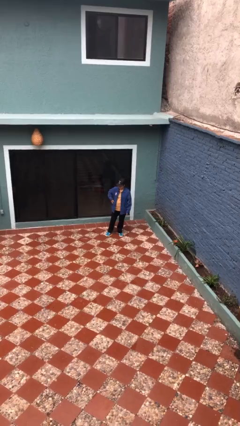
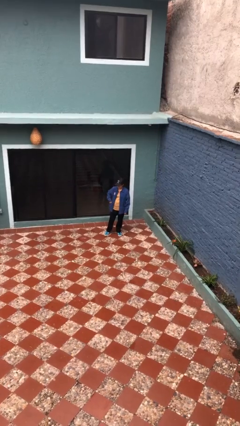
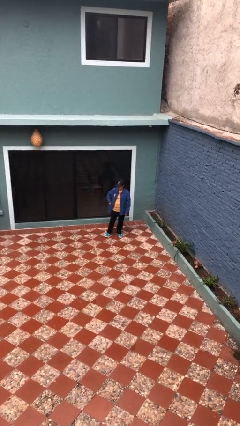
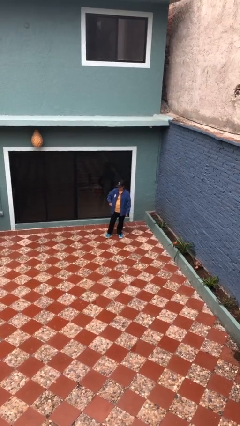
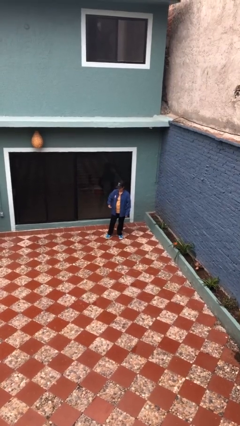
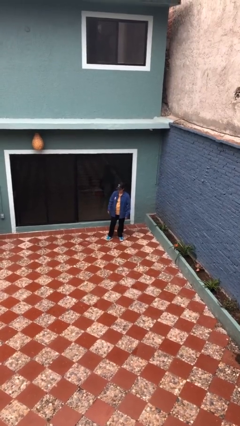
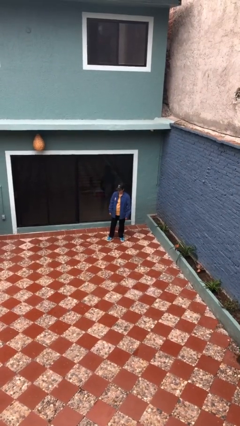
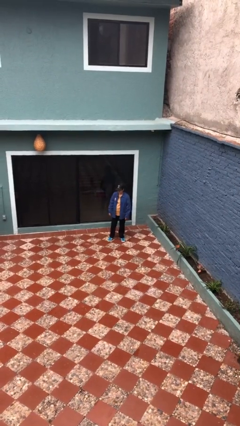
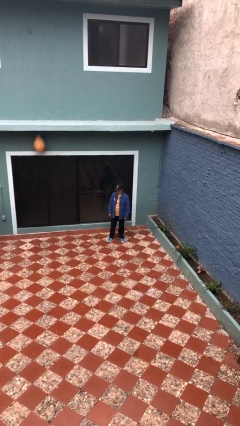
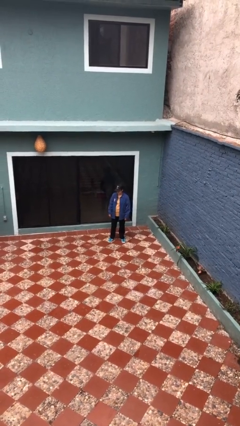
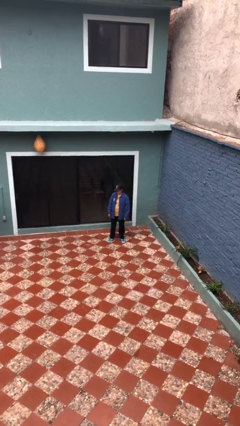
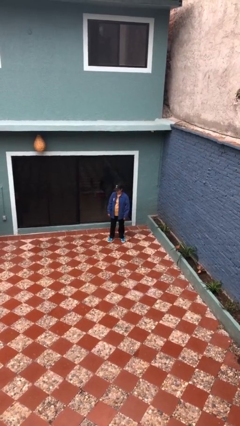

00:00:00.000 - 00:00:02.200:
person puts phone into pocket

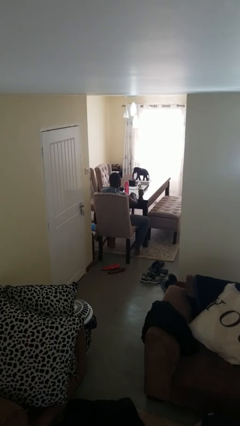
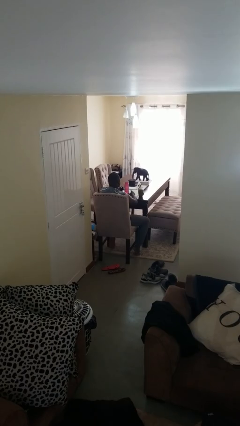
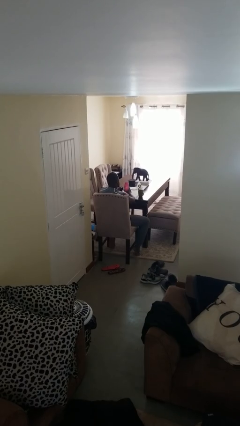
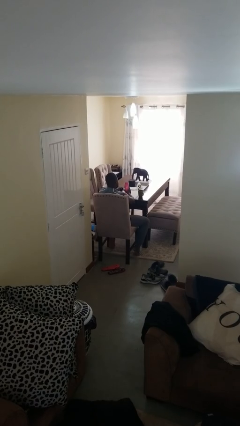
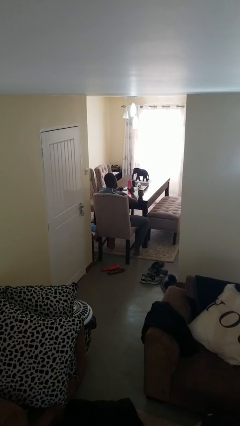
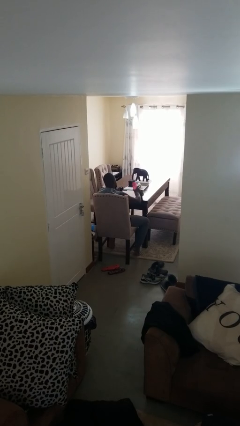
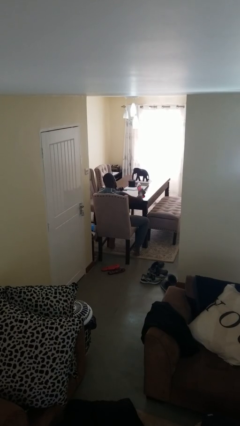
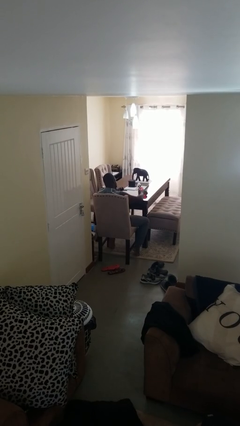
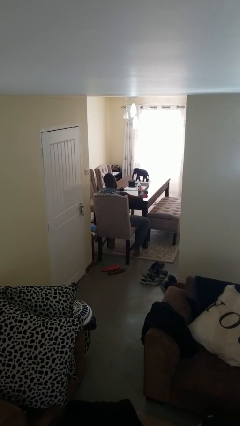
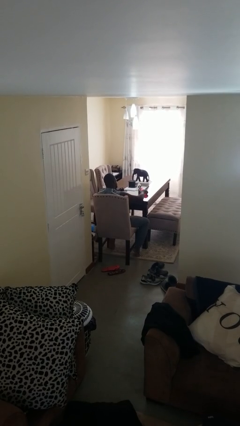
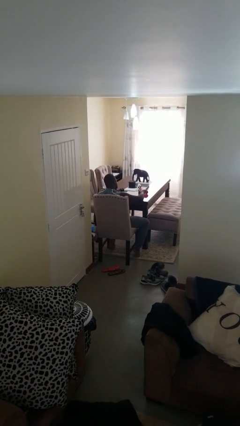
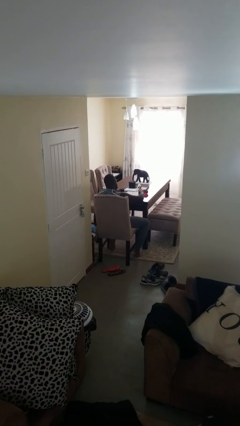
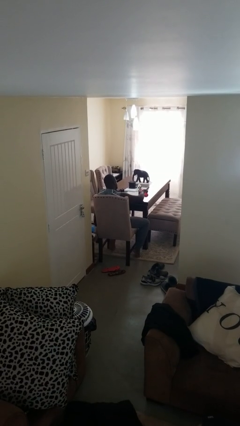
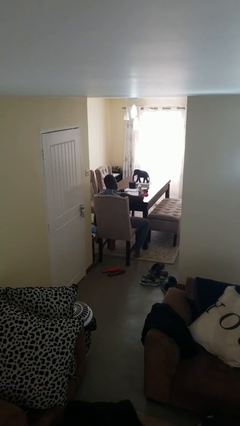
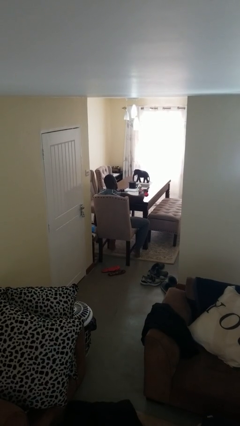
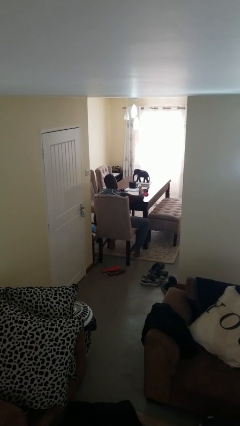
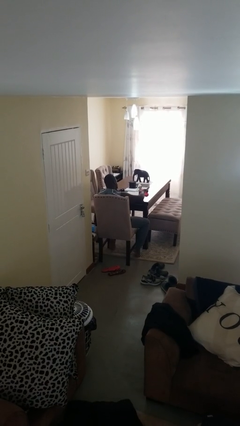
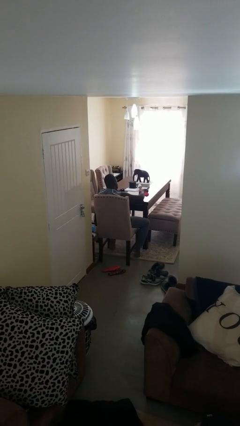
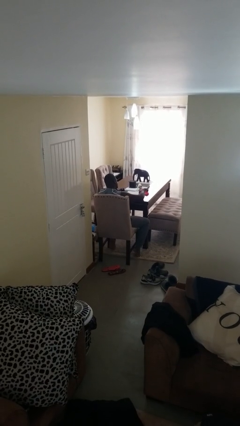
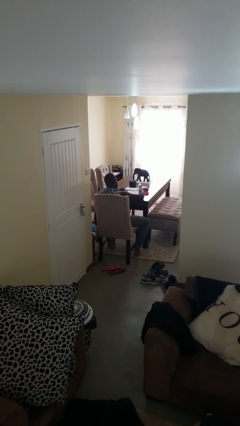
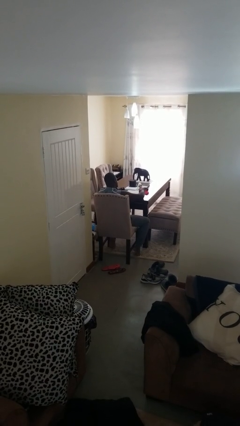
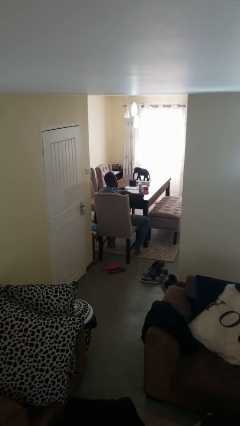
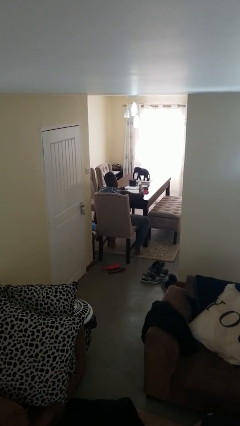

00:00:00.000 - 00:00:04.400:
person pours liquid into cup

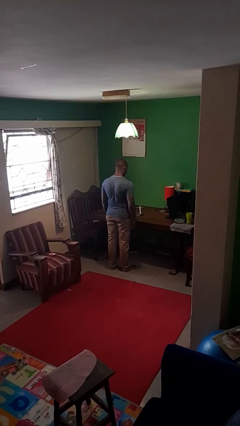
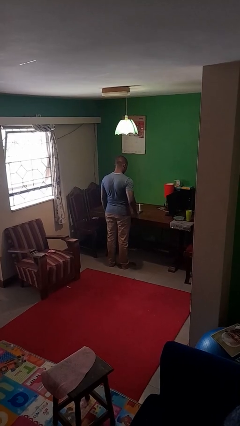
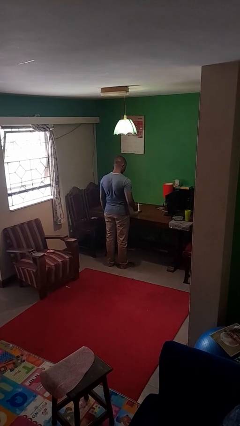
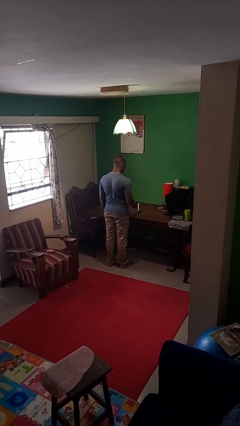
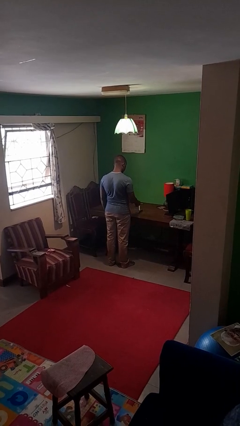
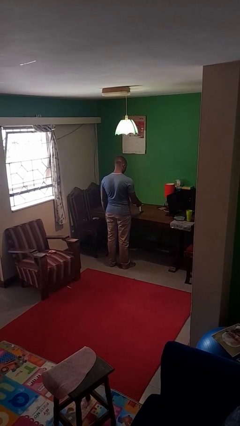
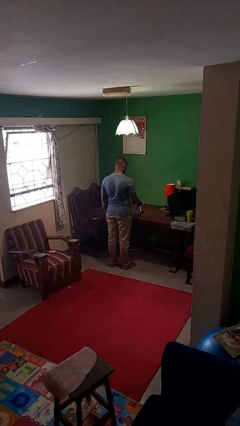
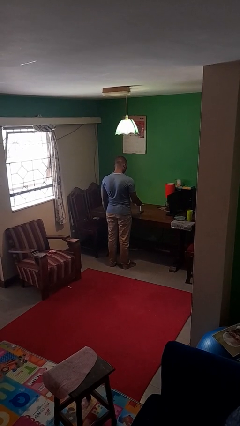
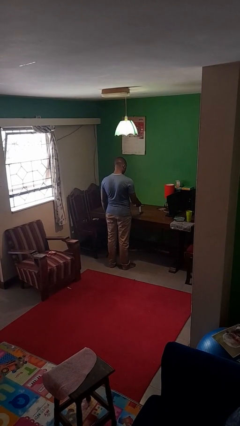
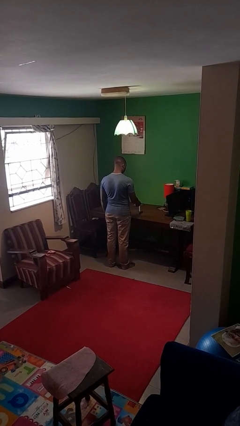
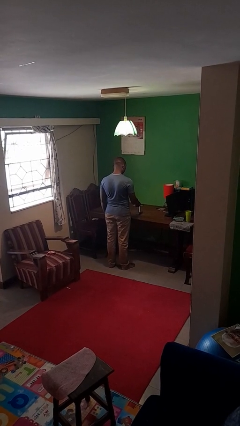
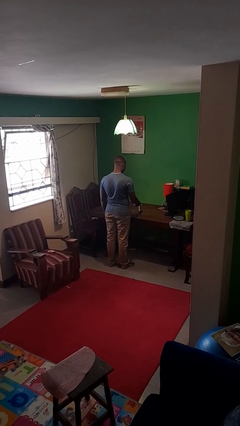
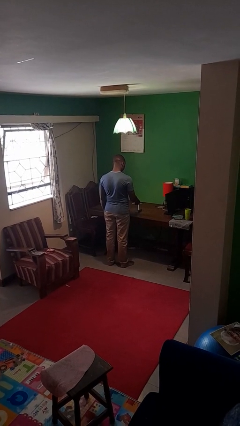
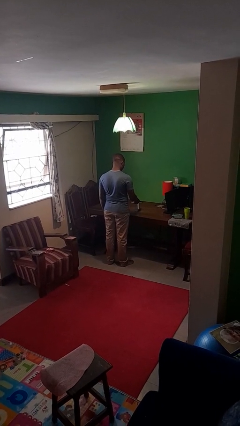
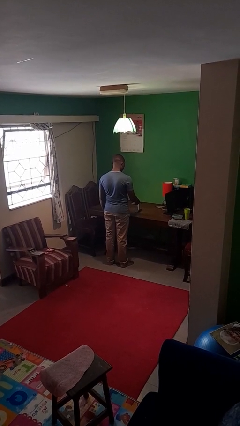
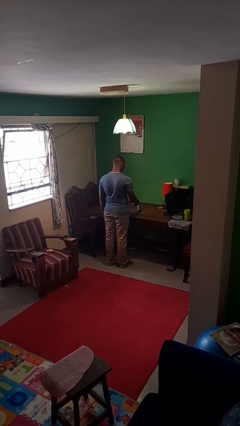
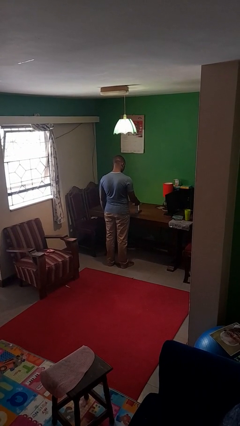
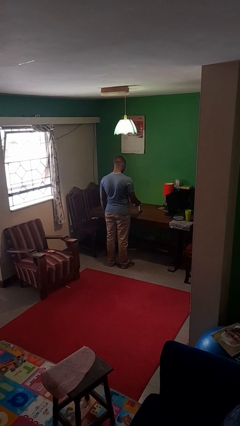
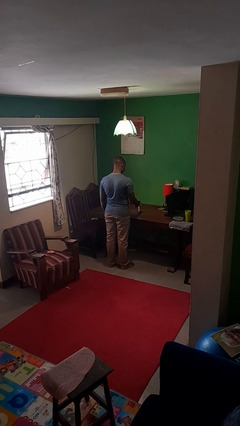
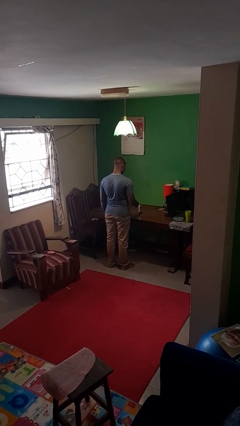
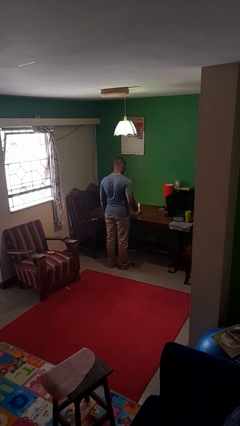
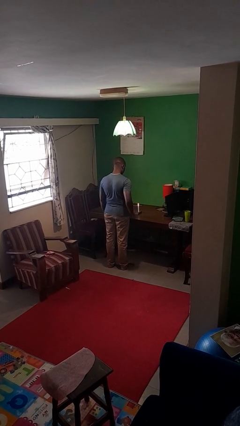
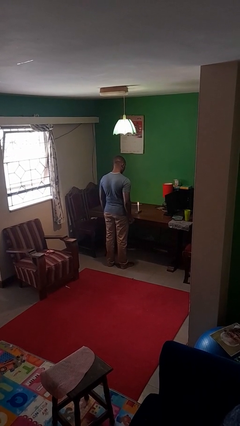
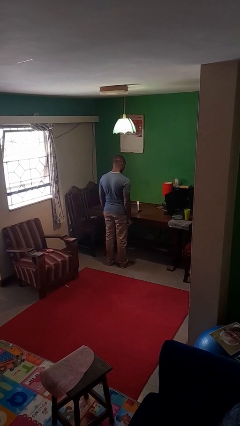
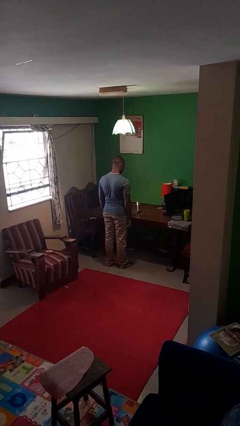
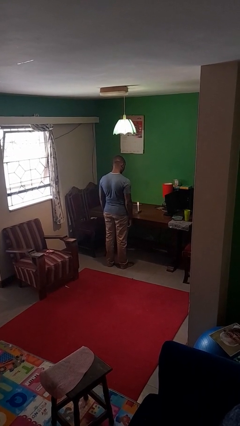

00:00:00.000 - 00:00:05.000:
person lights candle

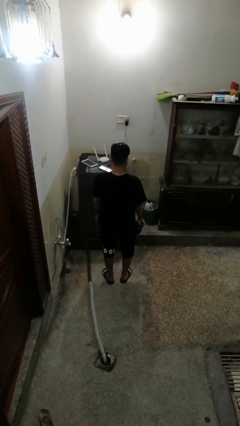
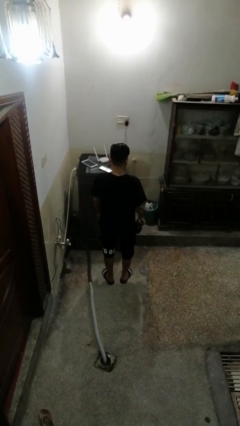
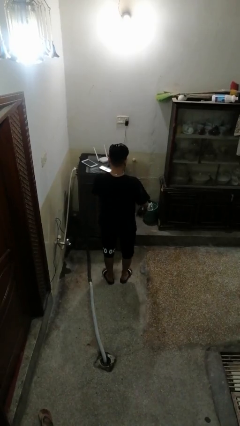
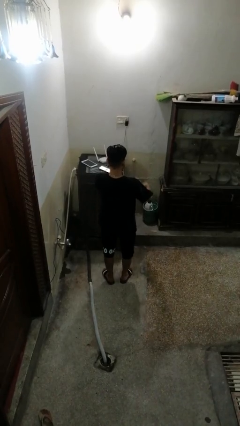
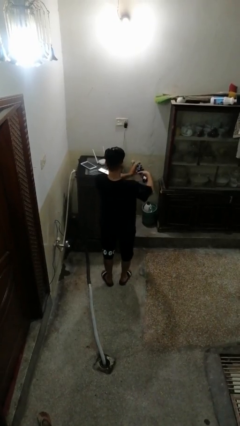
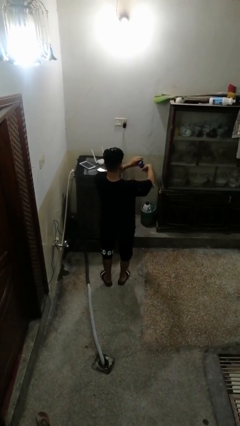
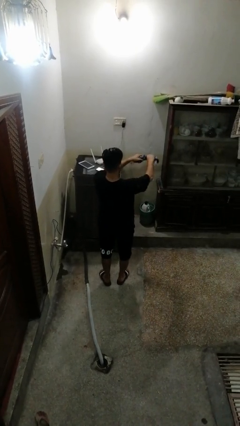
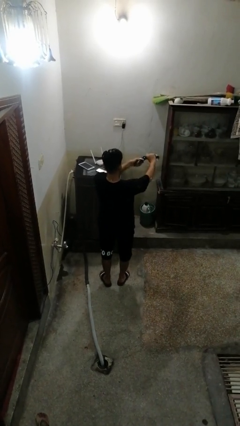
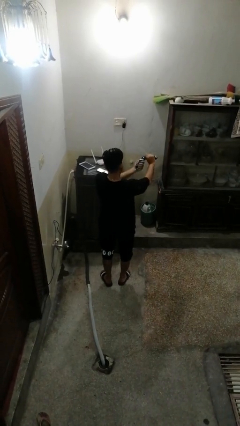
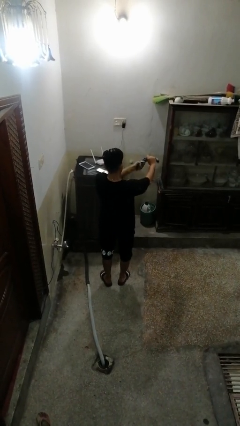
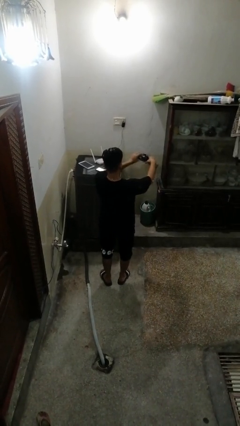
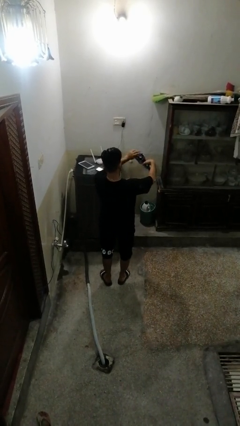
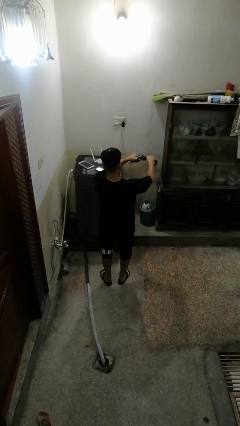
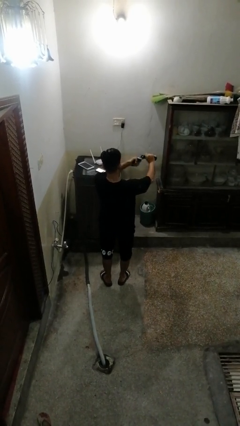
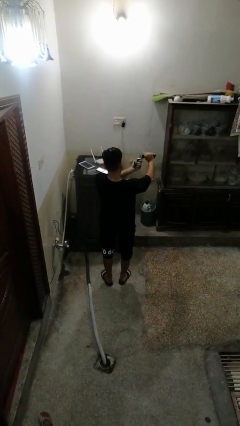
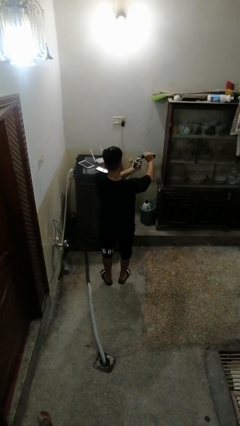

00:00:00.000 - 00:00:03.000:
person squeezes object

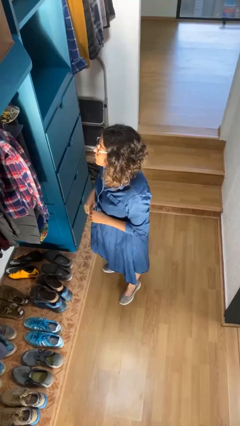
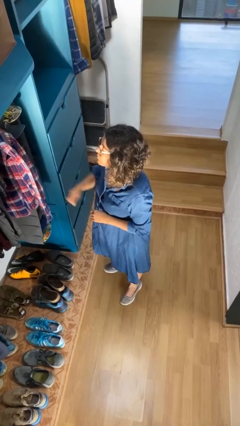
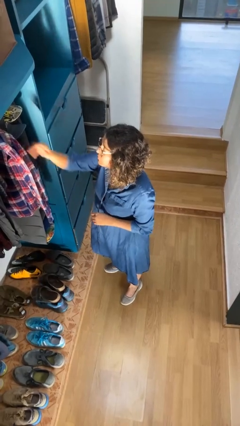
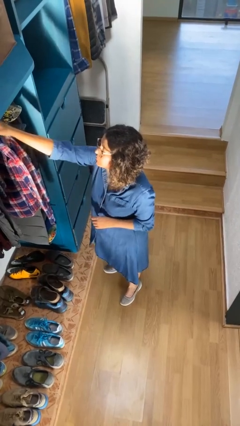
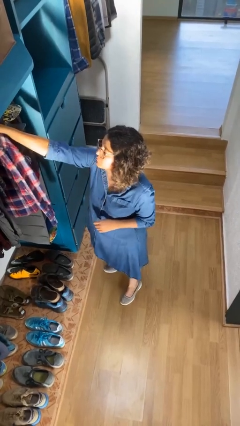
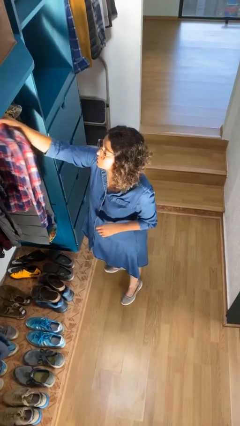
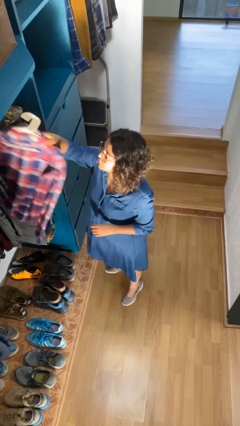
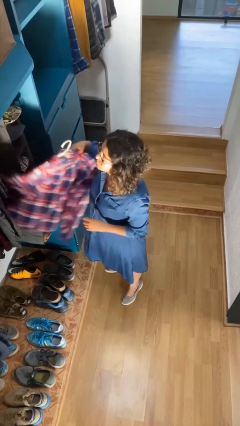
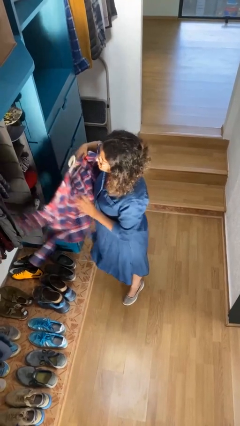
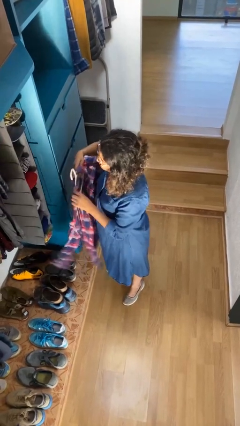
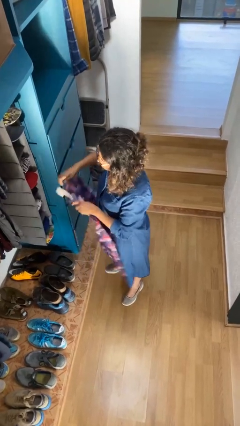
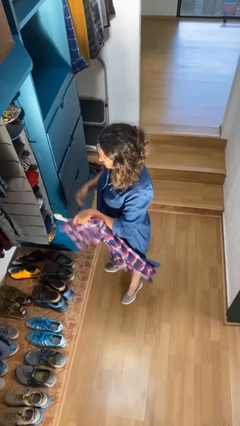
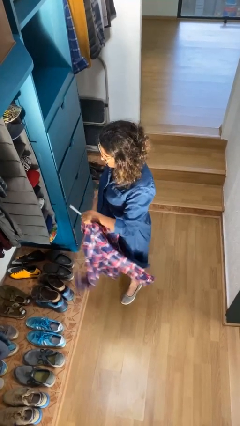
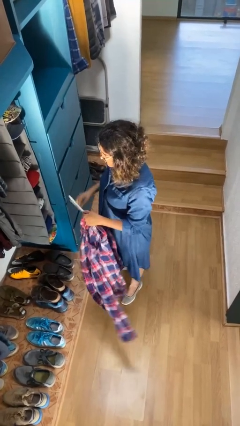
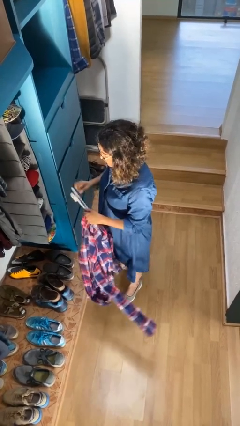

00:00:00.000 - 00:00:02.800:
person takes clothes from closet

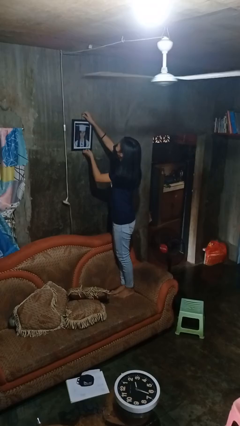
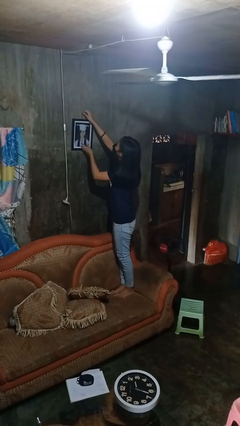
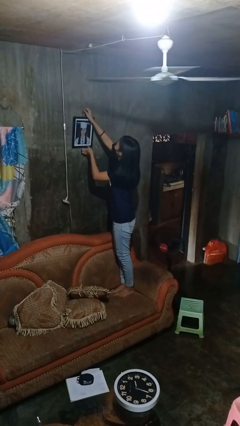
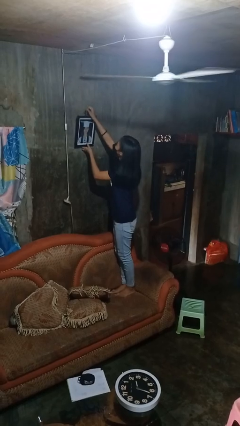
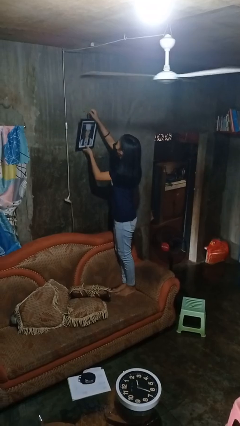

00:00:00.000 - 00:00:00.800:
person takes down picture frame
